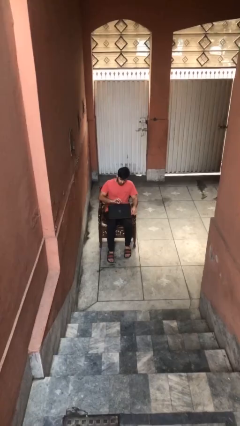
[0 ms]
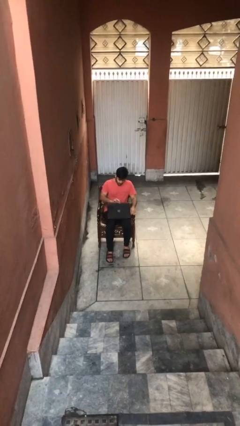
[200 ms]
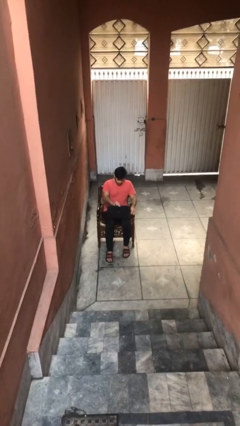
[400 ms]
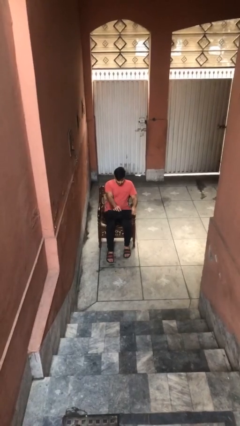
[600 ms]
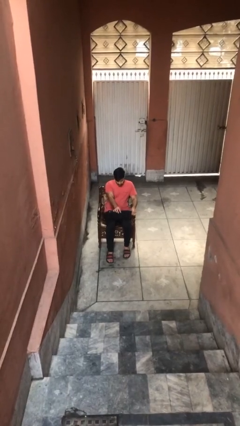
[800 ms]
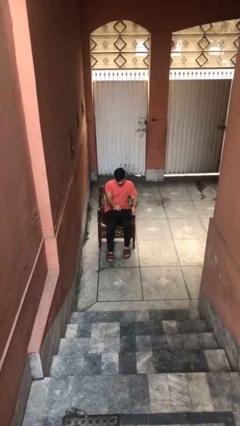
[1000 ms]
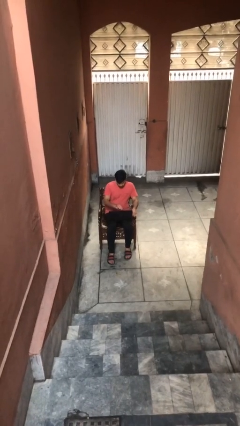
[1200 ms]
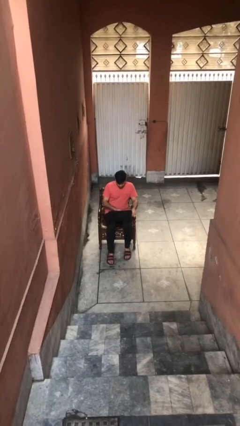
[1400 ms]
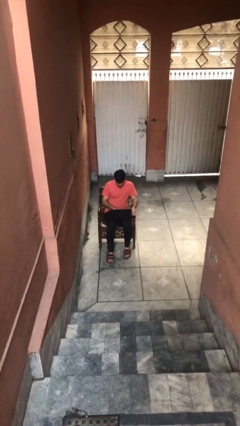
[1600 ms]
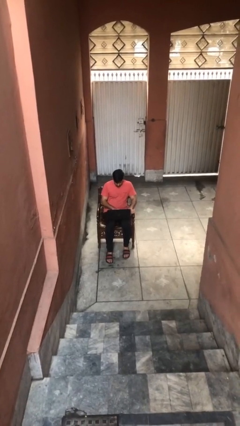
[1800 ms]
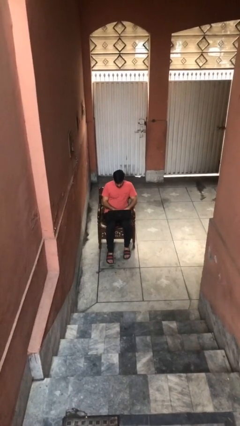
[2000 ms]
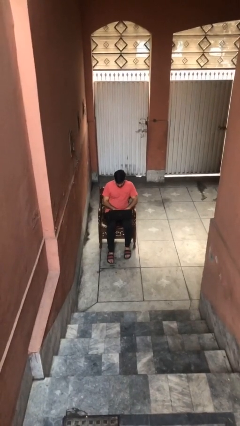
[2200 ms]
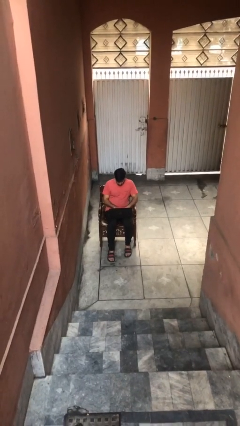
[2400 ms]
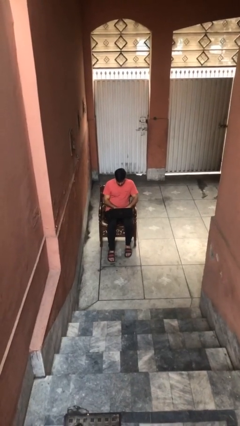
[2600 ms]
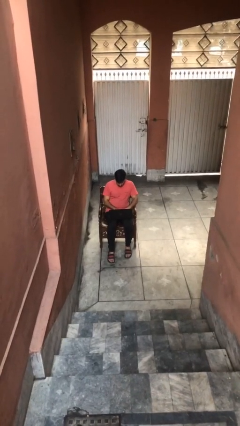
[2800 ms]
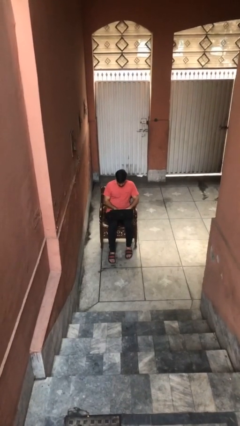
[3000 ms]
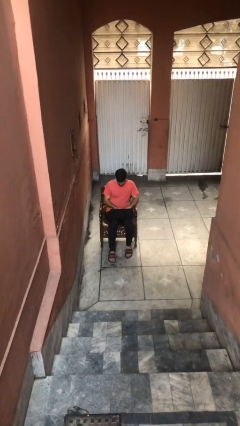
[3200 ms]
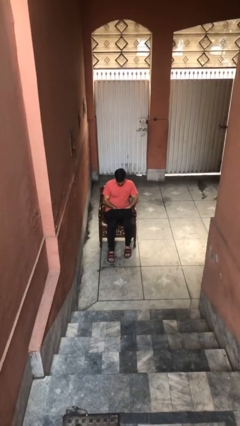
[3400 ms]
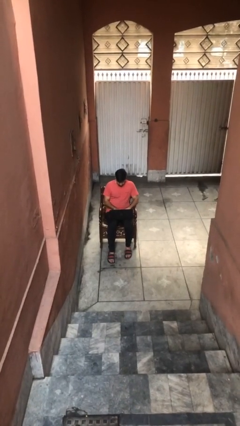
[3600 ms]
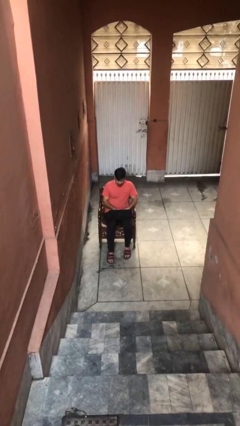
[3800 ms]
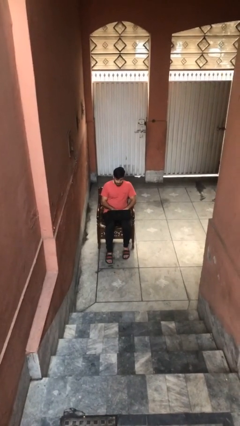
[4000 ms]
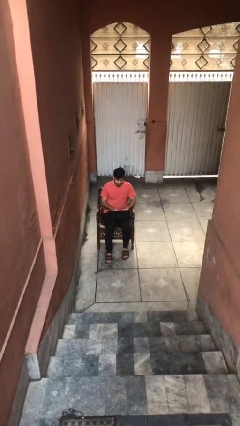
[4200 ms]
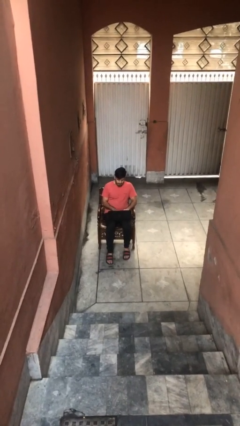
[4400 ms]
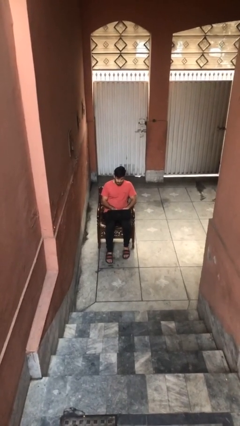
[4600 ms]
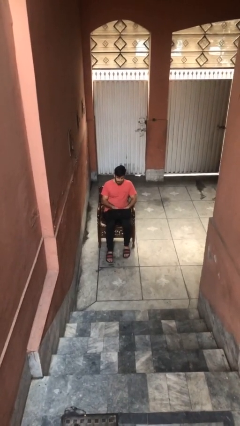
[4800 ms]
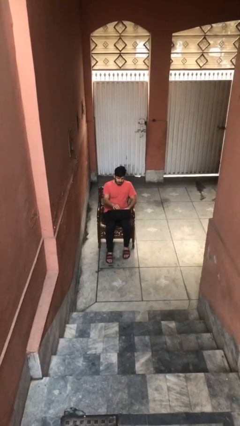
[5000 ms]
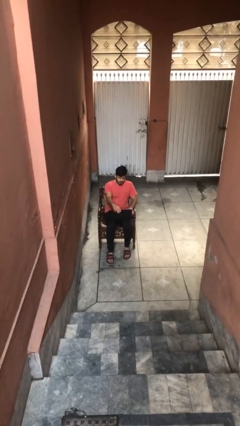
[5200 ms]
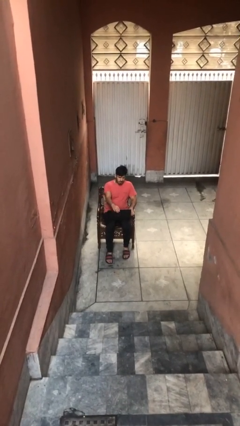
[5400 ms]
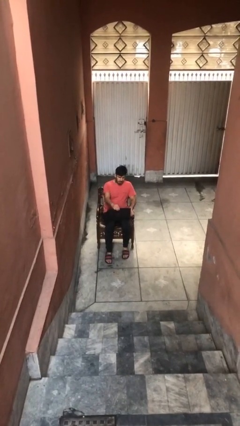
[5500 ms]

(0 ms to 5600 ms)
person interacts with laptop

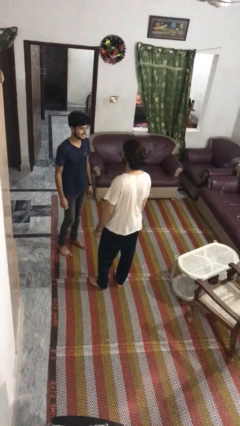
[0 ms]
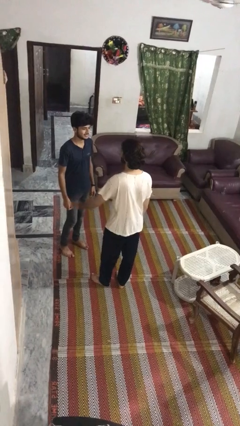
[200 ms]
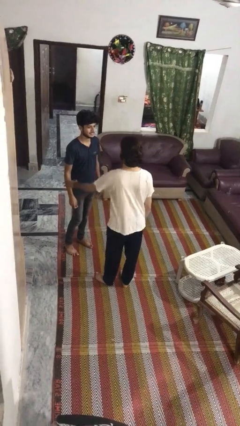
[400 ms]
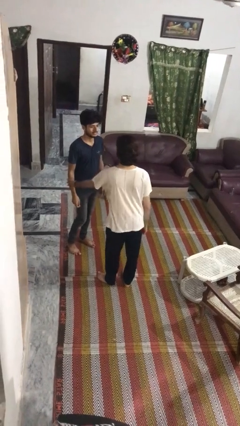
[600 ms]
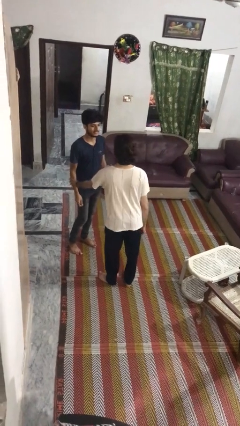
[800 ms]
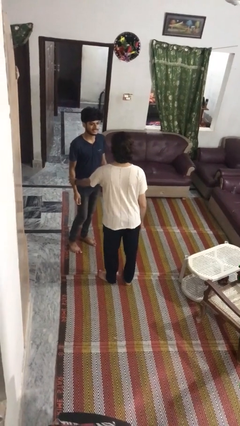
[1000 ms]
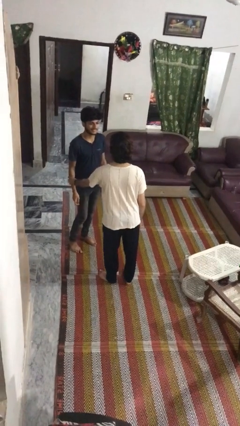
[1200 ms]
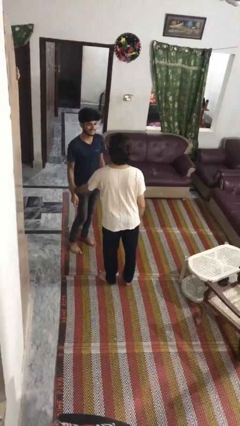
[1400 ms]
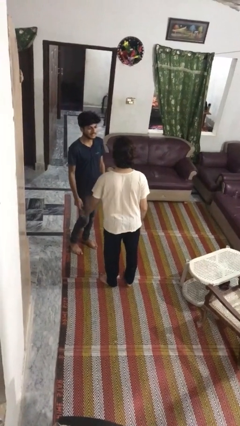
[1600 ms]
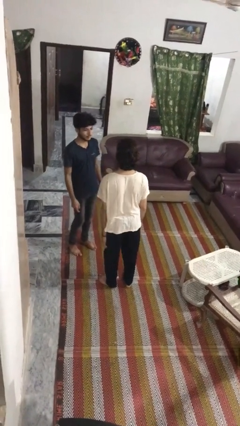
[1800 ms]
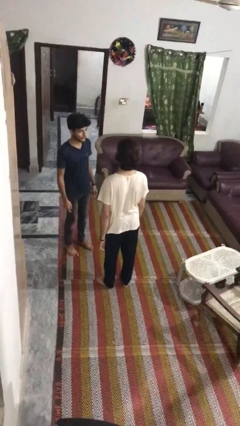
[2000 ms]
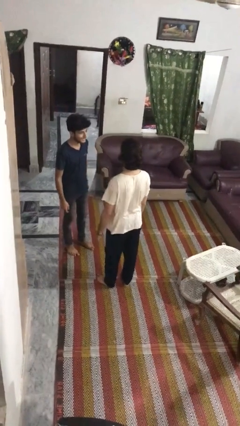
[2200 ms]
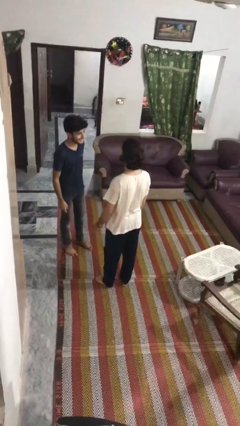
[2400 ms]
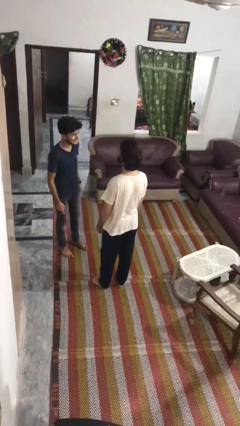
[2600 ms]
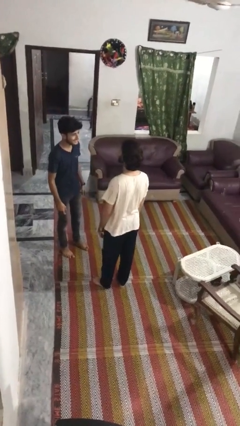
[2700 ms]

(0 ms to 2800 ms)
person grabs person by forearm

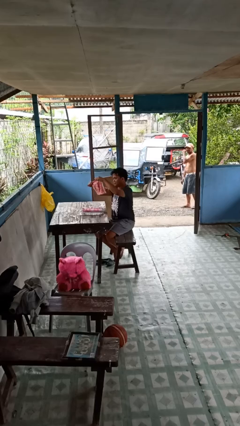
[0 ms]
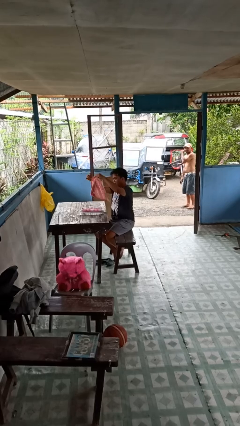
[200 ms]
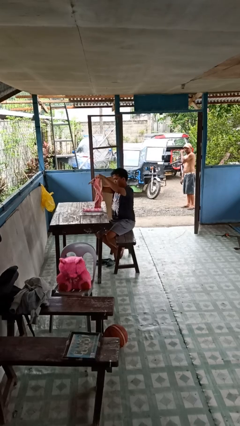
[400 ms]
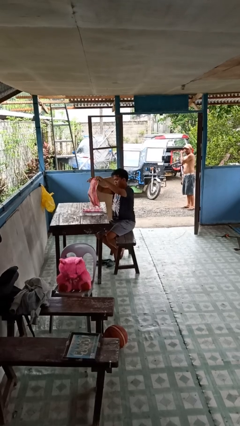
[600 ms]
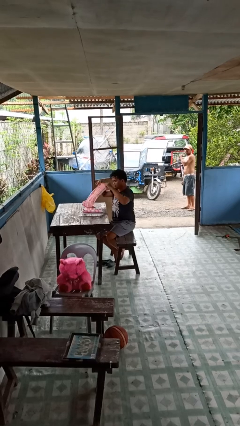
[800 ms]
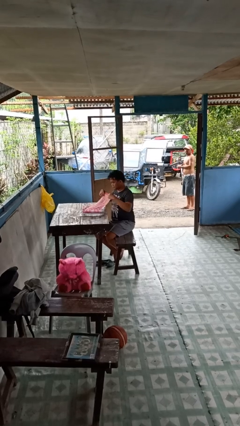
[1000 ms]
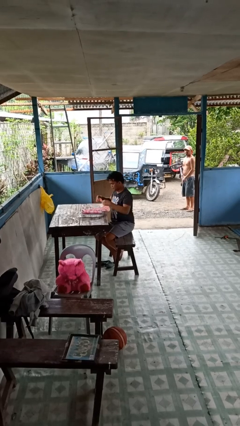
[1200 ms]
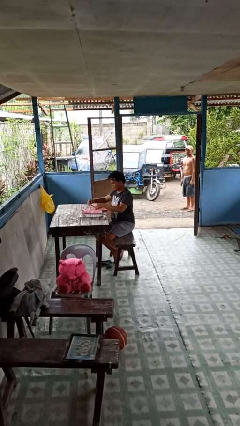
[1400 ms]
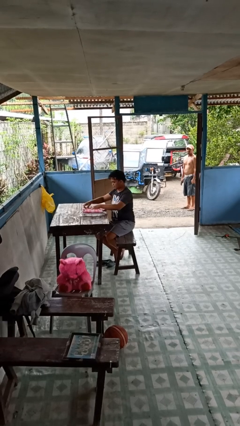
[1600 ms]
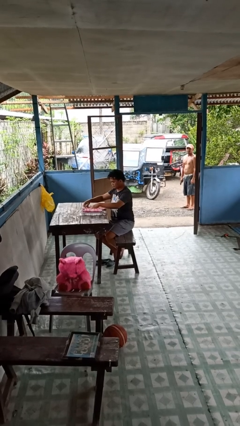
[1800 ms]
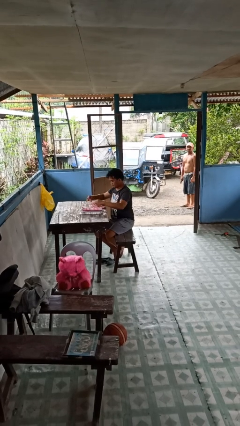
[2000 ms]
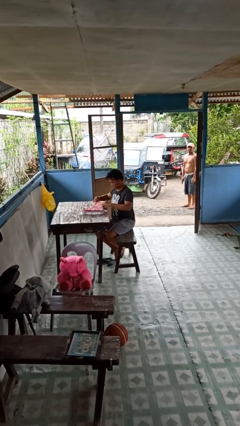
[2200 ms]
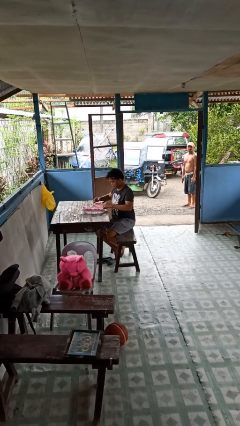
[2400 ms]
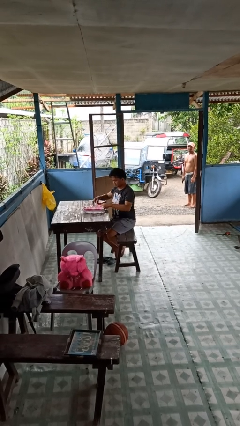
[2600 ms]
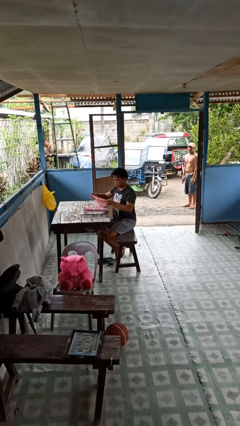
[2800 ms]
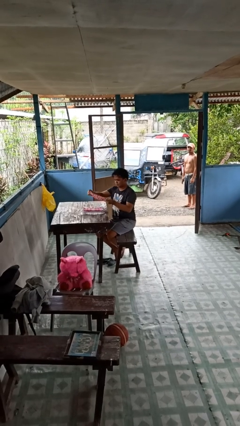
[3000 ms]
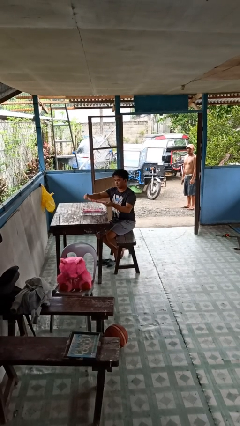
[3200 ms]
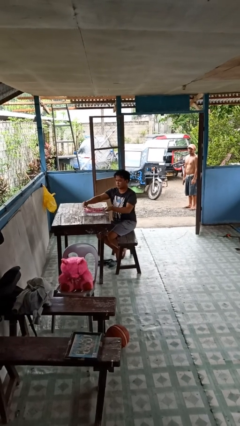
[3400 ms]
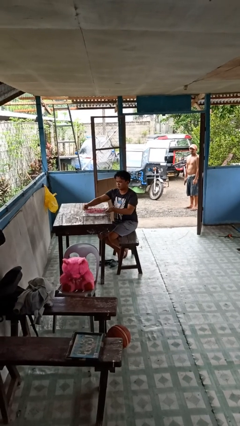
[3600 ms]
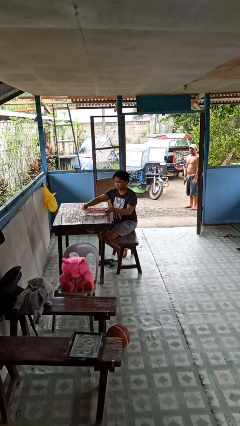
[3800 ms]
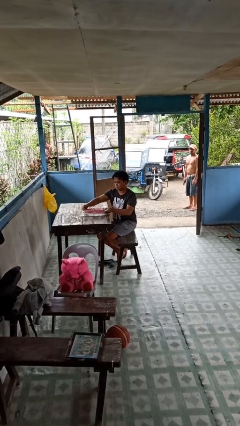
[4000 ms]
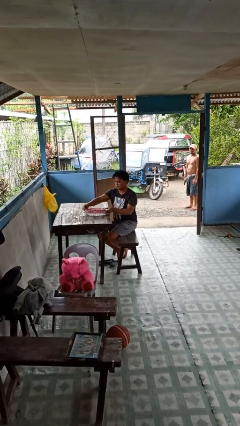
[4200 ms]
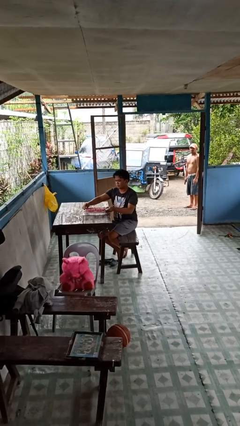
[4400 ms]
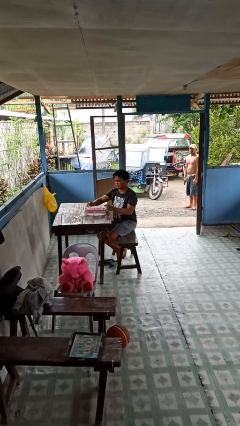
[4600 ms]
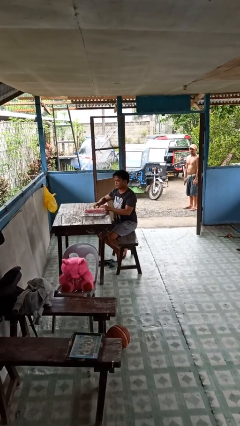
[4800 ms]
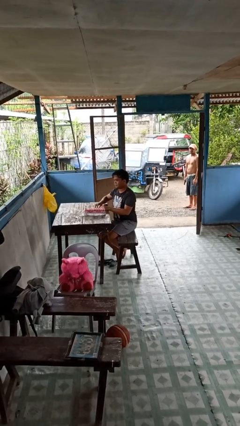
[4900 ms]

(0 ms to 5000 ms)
person folds towel

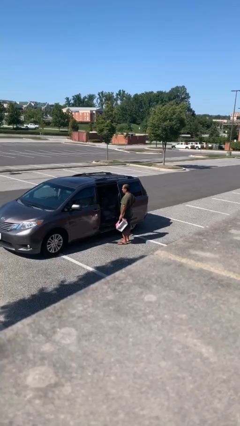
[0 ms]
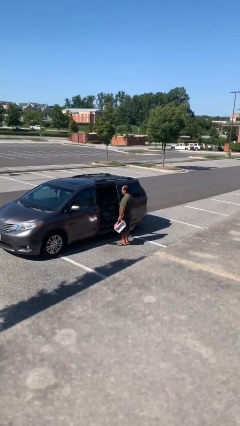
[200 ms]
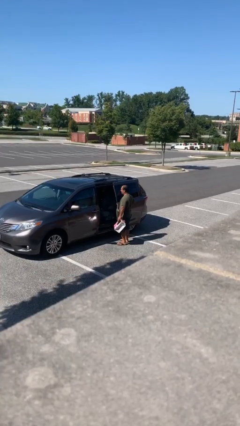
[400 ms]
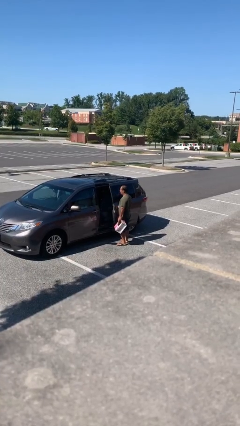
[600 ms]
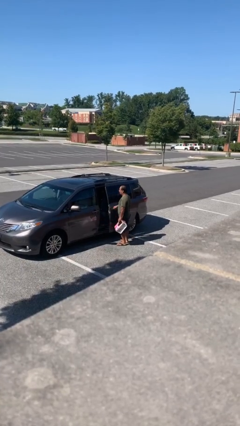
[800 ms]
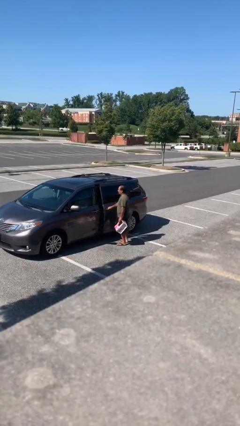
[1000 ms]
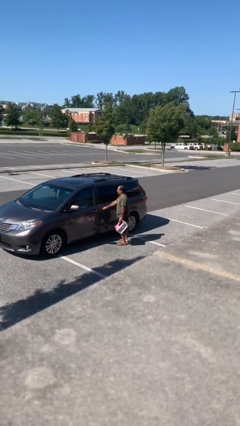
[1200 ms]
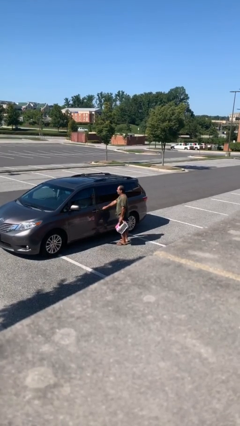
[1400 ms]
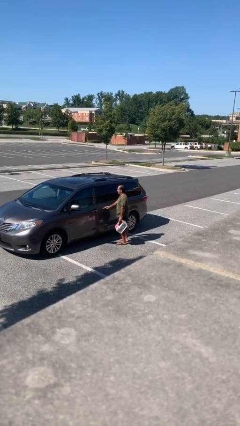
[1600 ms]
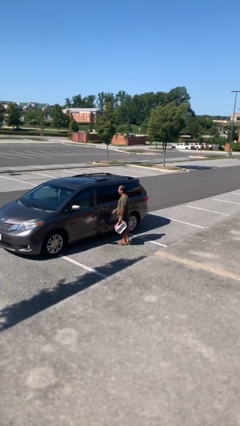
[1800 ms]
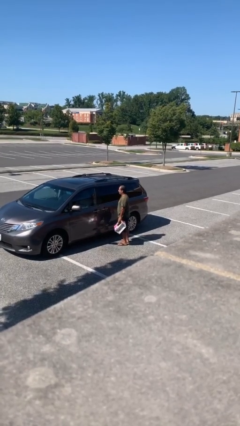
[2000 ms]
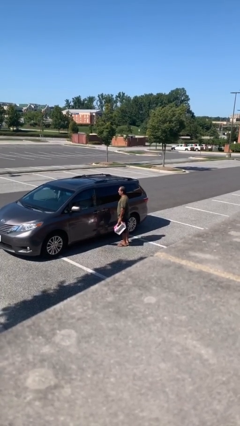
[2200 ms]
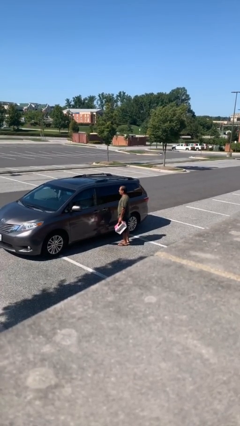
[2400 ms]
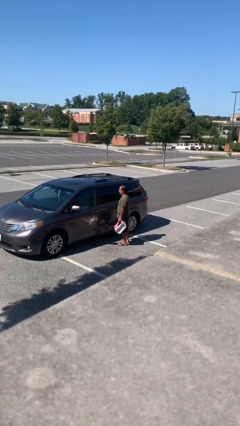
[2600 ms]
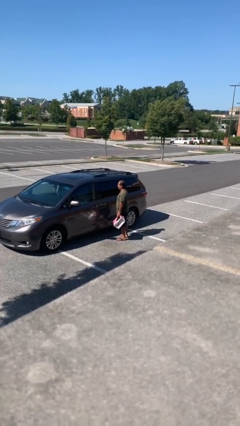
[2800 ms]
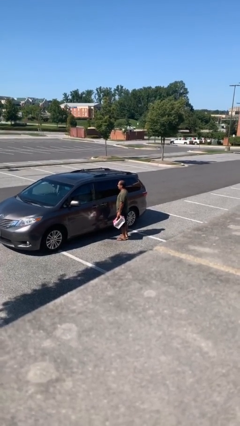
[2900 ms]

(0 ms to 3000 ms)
person closes car door

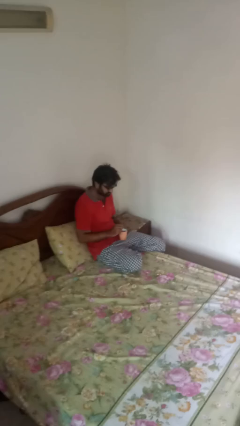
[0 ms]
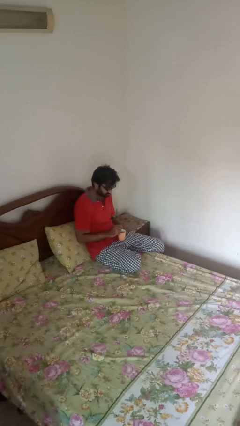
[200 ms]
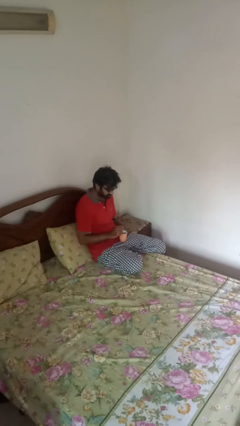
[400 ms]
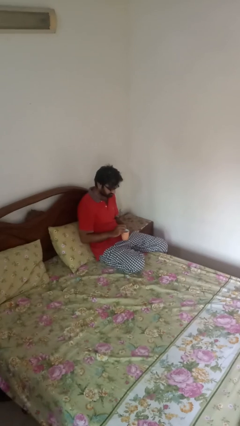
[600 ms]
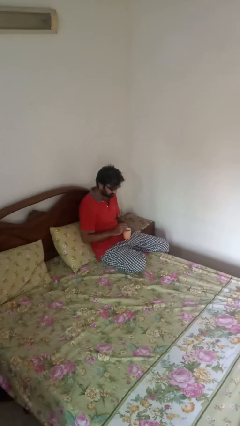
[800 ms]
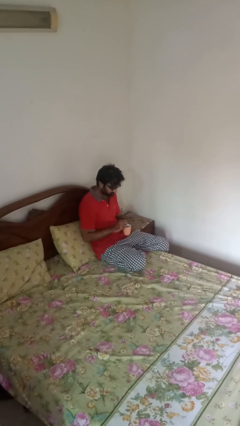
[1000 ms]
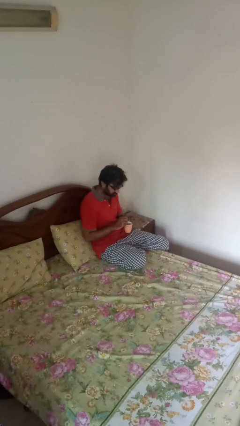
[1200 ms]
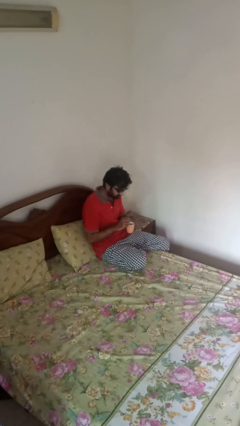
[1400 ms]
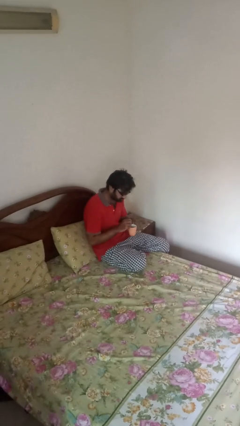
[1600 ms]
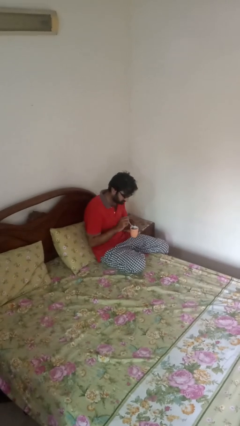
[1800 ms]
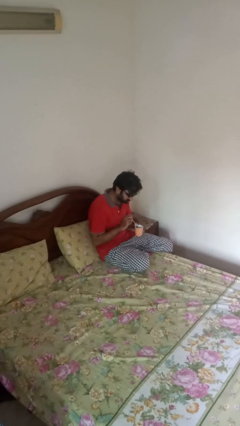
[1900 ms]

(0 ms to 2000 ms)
person stirs mug
